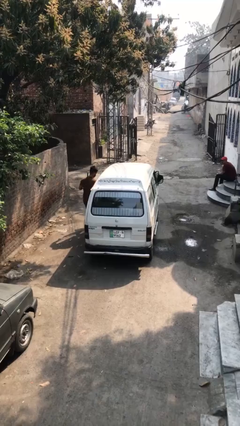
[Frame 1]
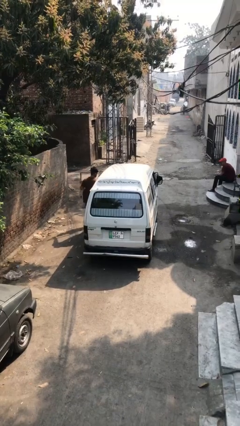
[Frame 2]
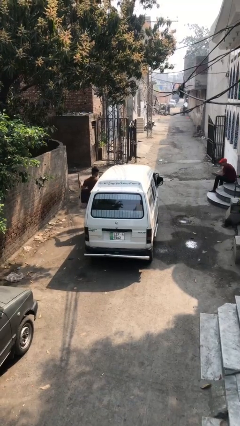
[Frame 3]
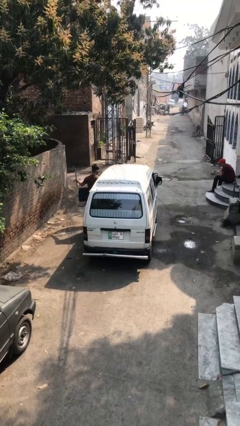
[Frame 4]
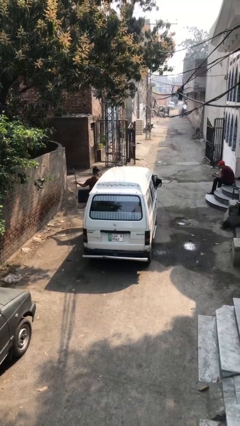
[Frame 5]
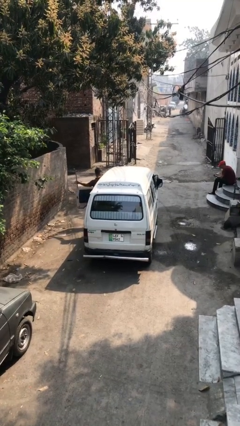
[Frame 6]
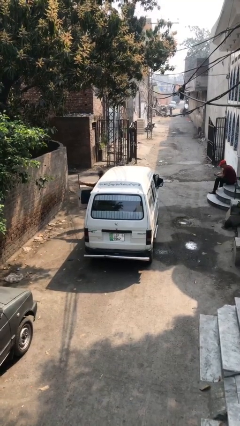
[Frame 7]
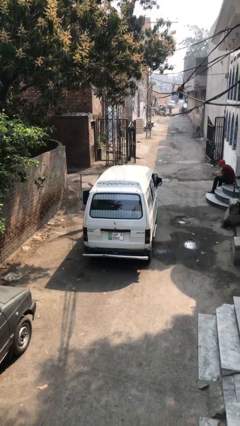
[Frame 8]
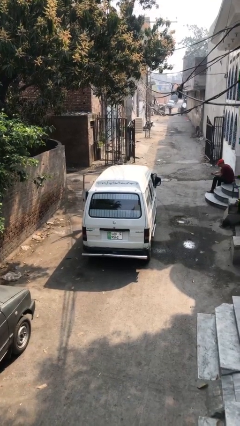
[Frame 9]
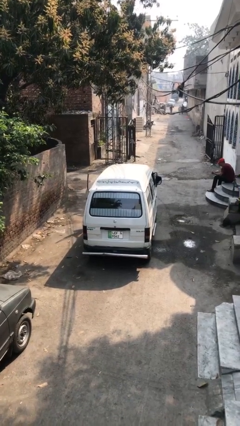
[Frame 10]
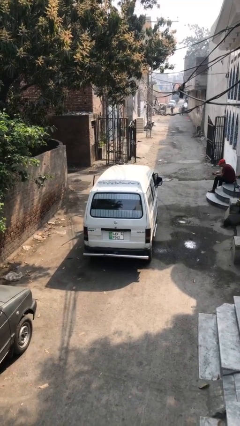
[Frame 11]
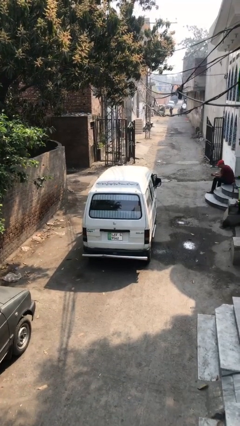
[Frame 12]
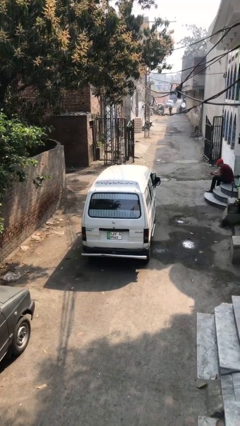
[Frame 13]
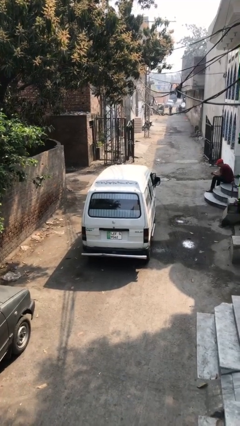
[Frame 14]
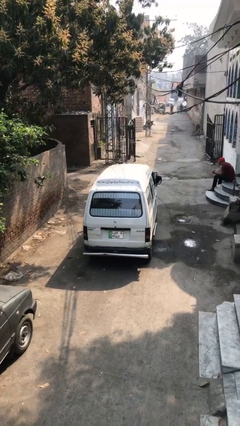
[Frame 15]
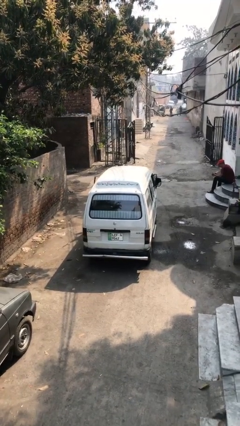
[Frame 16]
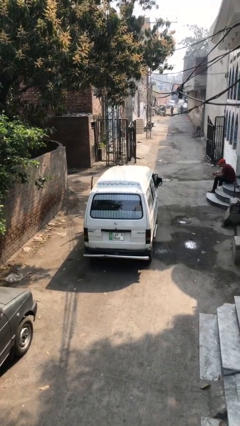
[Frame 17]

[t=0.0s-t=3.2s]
car picks up person

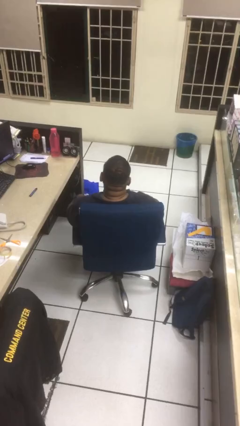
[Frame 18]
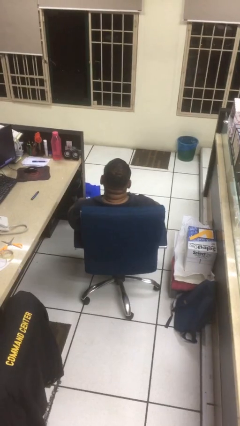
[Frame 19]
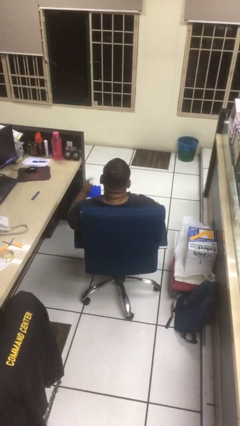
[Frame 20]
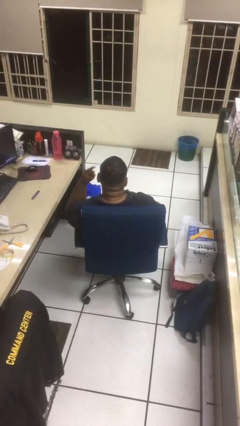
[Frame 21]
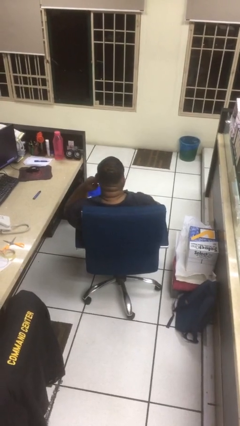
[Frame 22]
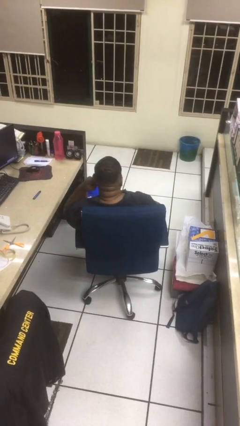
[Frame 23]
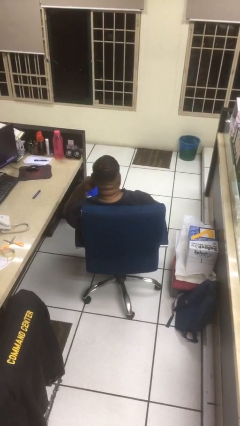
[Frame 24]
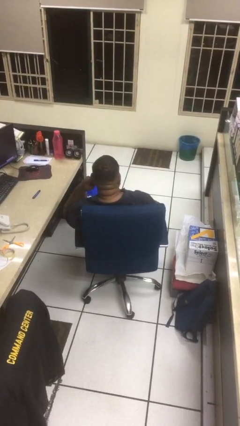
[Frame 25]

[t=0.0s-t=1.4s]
person gestures listen closely

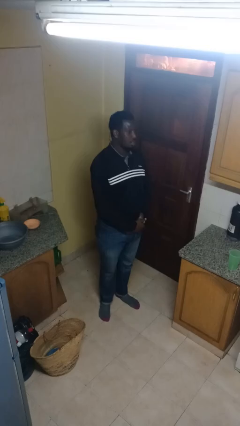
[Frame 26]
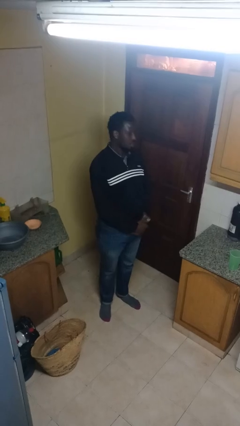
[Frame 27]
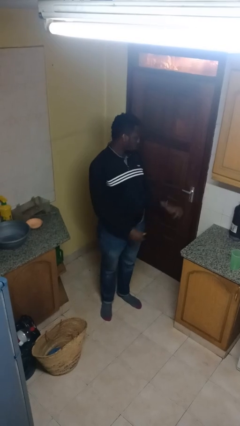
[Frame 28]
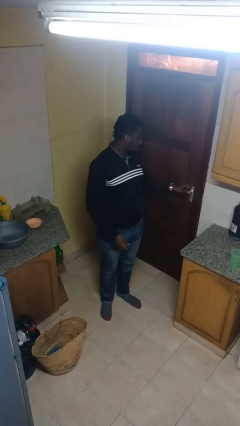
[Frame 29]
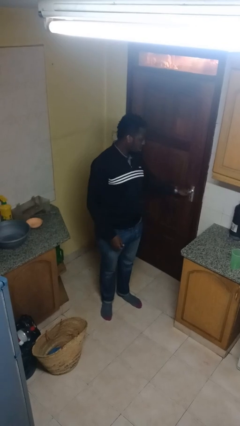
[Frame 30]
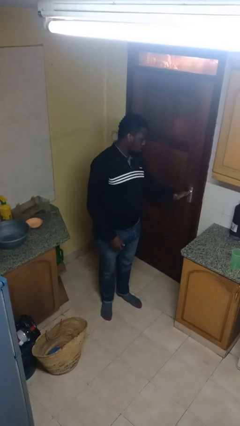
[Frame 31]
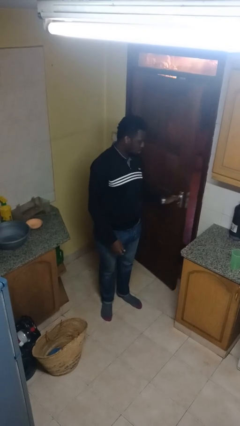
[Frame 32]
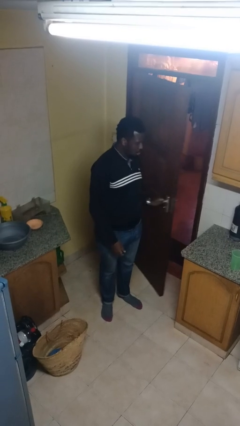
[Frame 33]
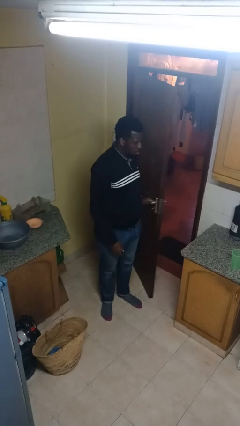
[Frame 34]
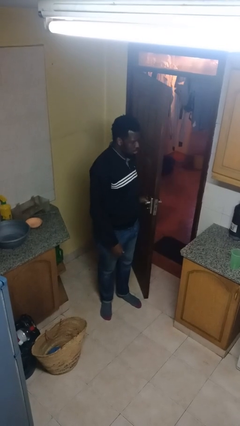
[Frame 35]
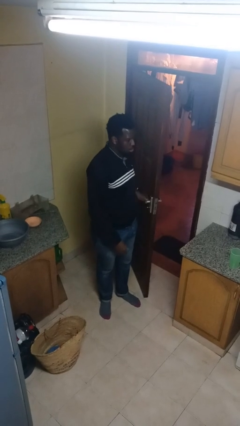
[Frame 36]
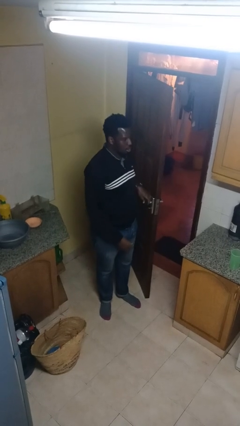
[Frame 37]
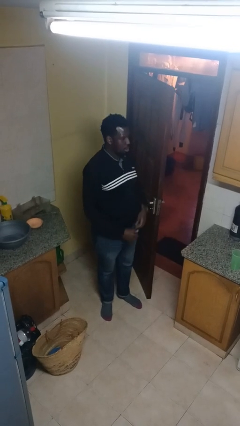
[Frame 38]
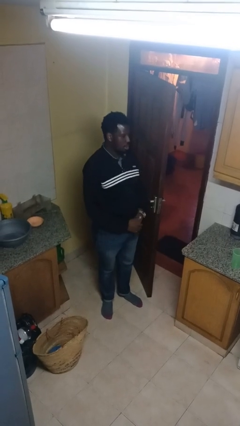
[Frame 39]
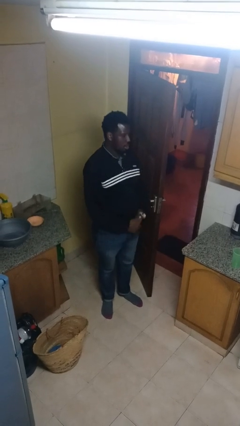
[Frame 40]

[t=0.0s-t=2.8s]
person opens facility door

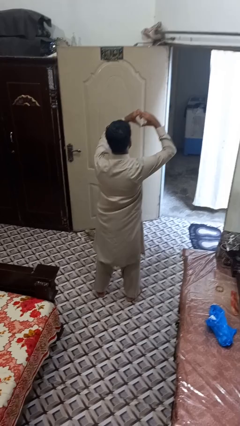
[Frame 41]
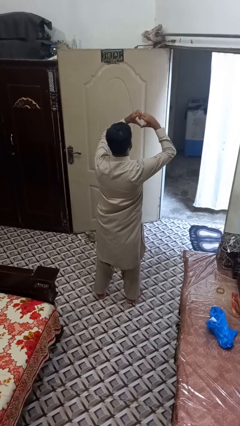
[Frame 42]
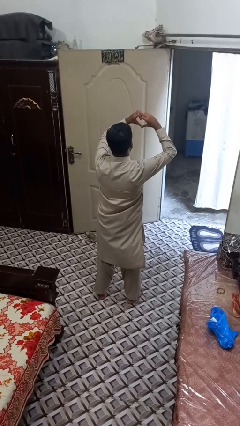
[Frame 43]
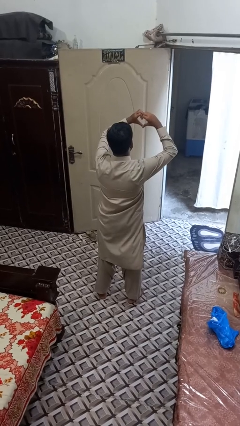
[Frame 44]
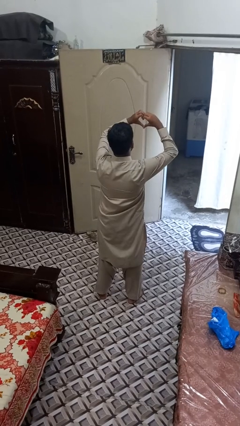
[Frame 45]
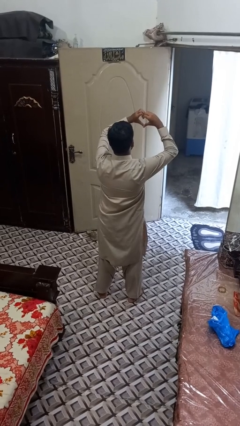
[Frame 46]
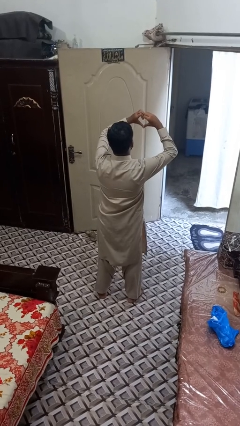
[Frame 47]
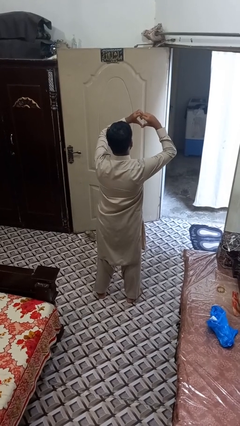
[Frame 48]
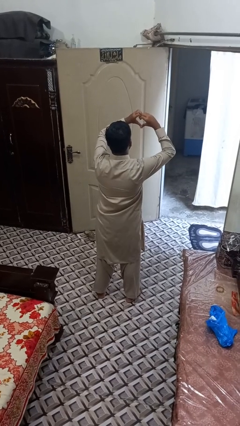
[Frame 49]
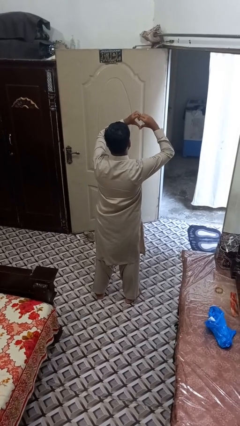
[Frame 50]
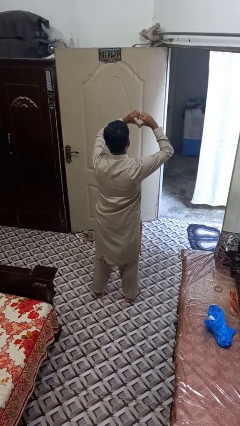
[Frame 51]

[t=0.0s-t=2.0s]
person gestures heart

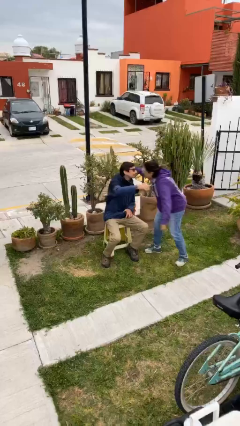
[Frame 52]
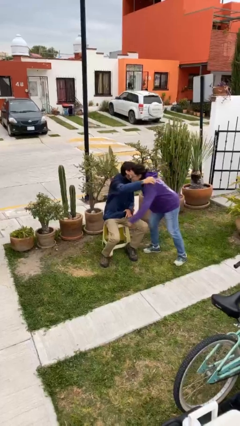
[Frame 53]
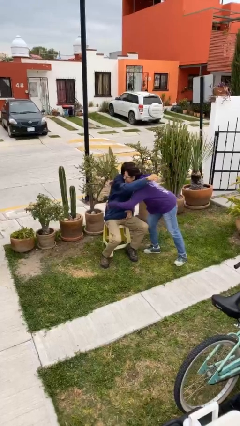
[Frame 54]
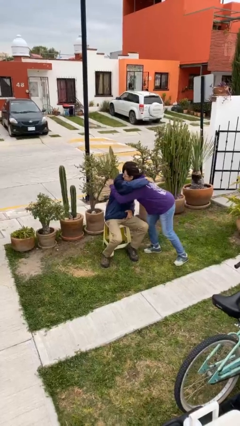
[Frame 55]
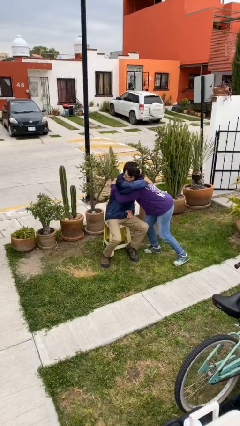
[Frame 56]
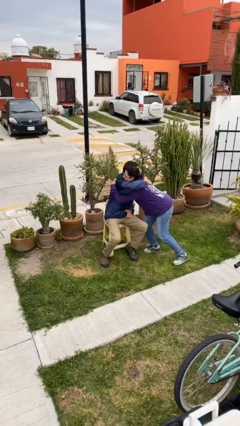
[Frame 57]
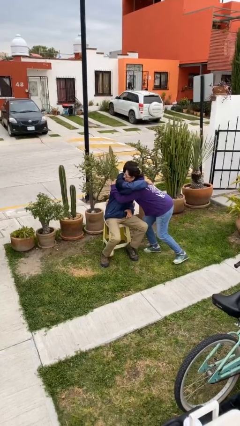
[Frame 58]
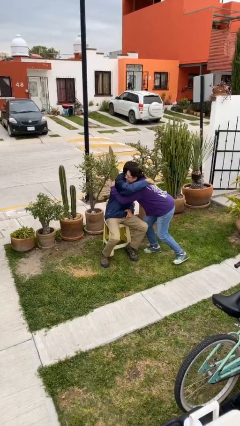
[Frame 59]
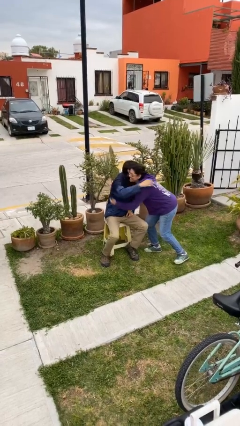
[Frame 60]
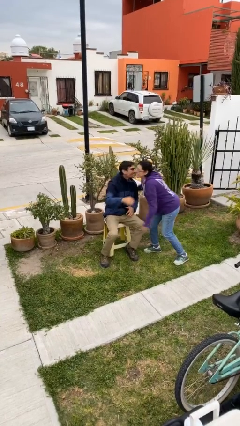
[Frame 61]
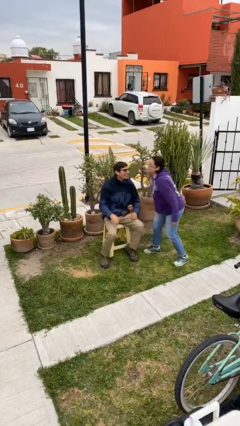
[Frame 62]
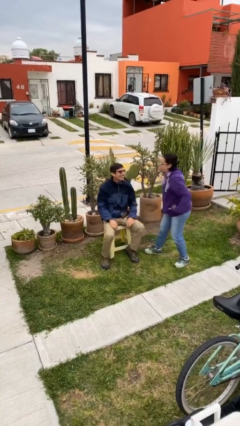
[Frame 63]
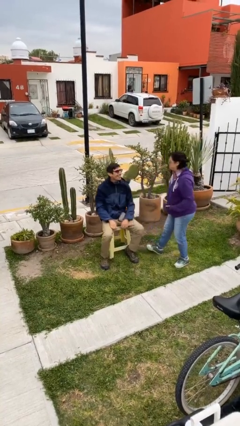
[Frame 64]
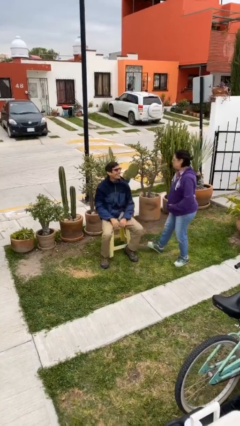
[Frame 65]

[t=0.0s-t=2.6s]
person embraces person

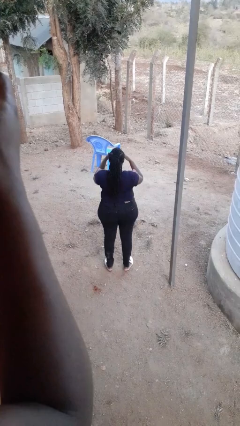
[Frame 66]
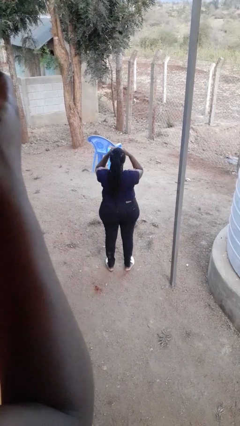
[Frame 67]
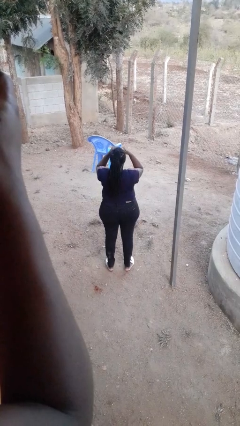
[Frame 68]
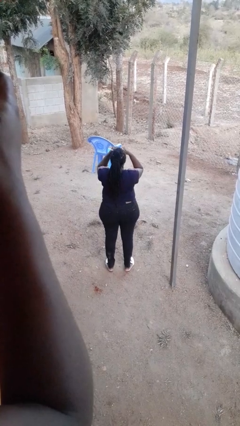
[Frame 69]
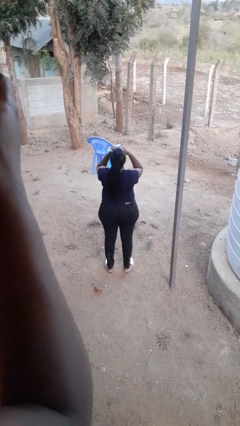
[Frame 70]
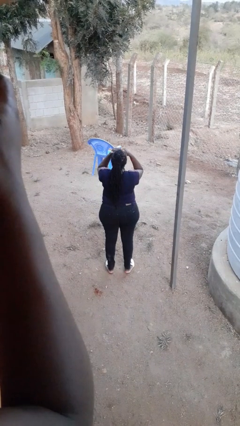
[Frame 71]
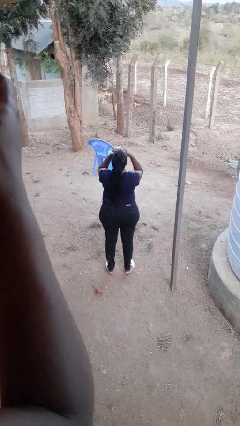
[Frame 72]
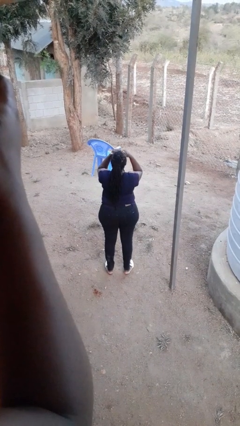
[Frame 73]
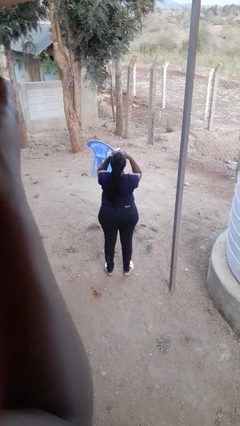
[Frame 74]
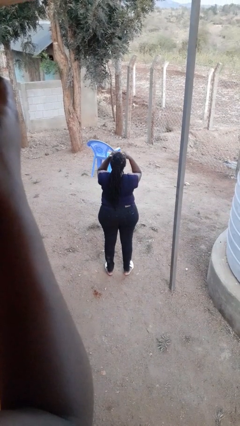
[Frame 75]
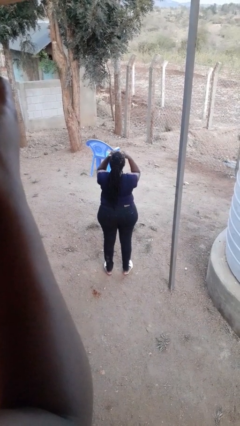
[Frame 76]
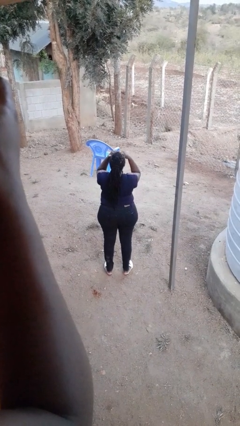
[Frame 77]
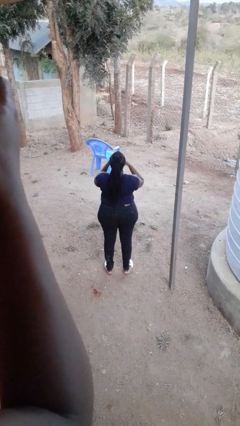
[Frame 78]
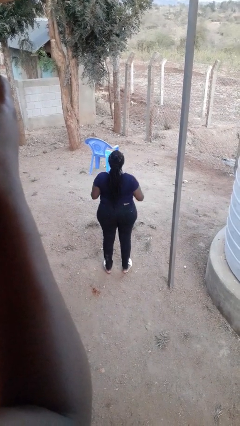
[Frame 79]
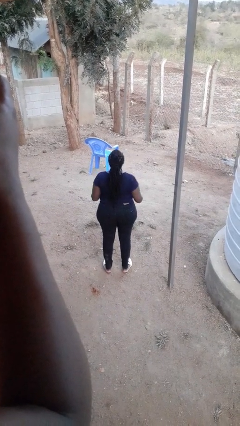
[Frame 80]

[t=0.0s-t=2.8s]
person shades eyes

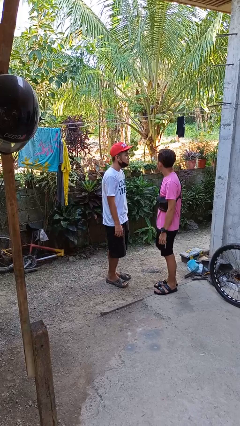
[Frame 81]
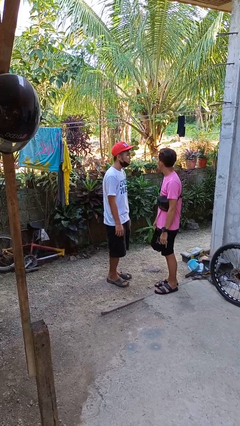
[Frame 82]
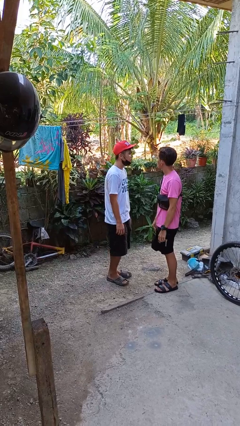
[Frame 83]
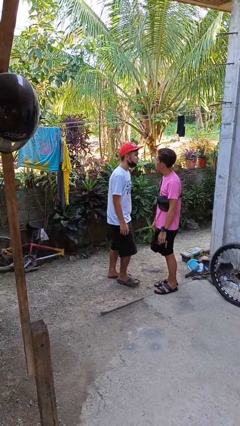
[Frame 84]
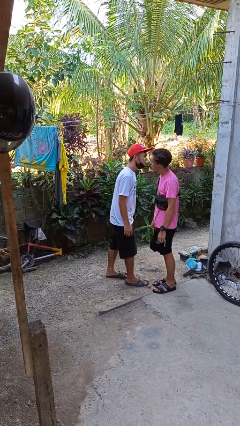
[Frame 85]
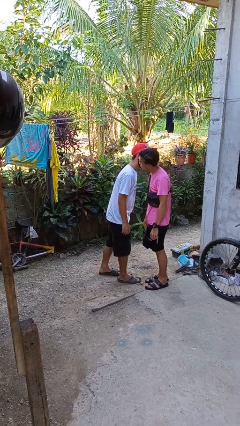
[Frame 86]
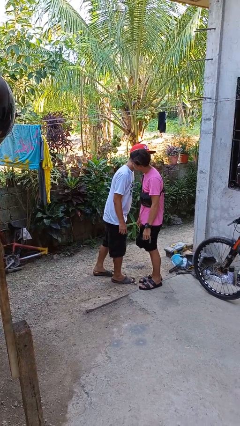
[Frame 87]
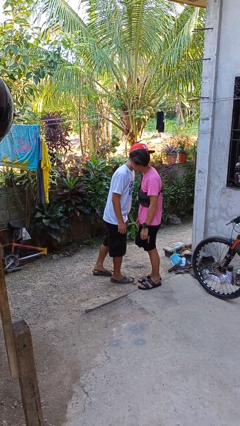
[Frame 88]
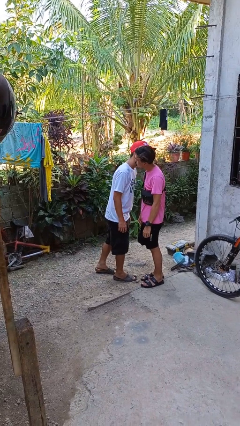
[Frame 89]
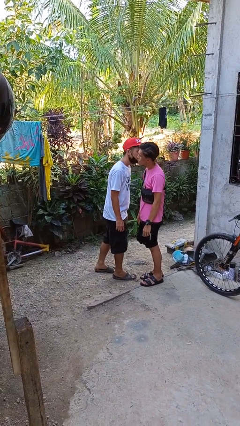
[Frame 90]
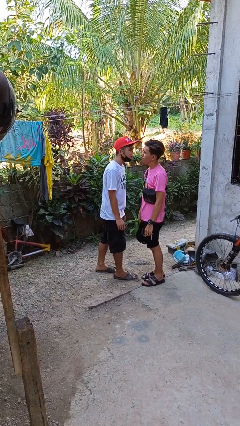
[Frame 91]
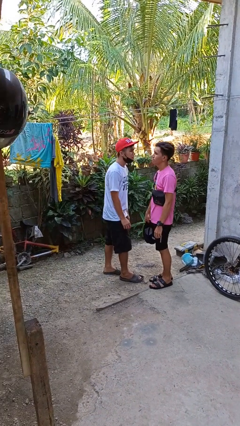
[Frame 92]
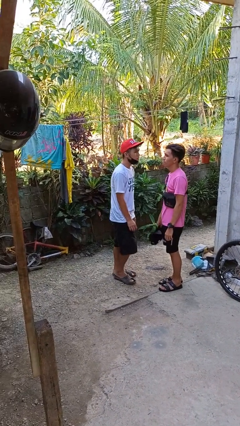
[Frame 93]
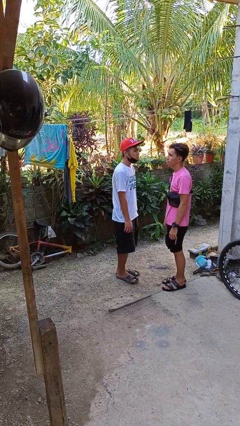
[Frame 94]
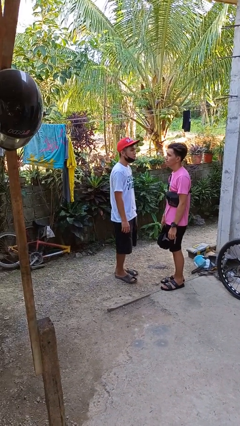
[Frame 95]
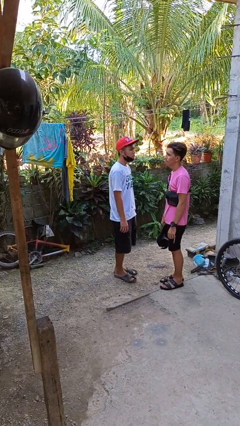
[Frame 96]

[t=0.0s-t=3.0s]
person kisses cheek of person
